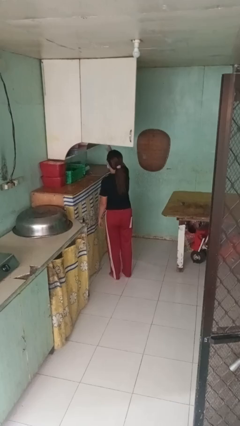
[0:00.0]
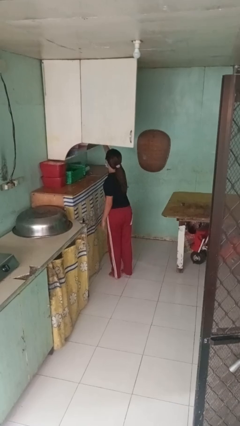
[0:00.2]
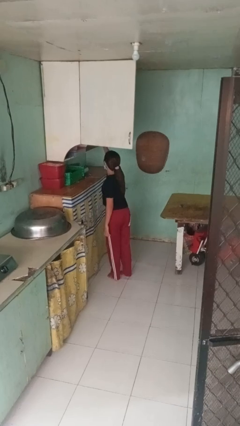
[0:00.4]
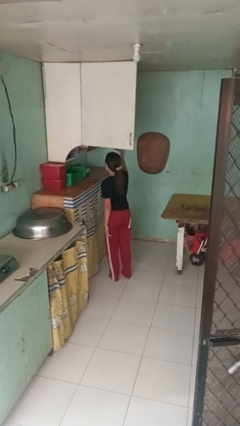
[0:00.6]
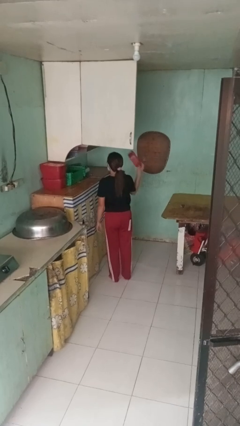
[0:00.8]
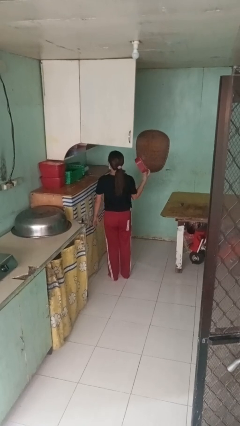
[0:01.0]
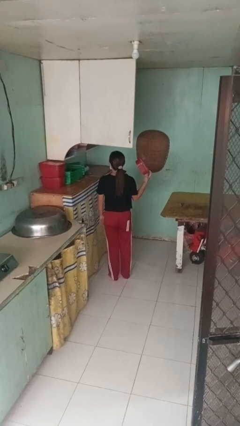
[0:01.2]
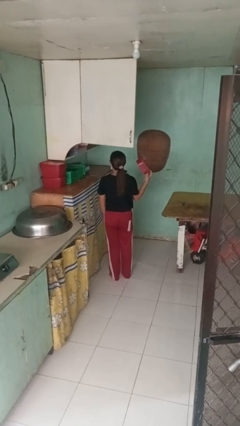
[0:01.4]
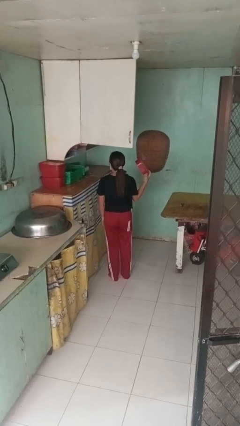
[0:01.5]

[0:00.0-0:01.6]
person takes object from cabinet

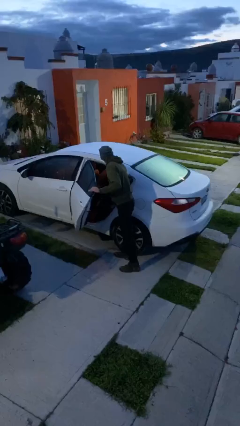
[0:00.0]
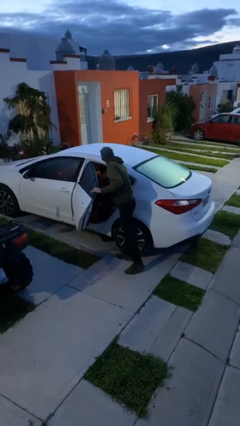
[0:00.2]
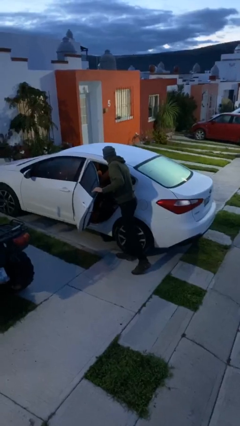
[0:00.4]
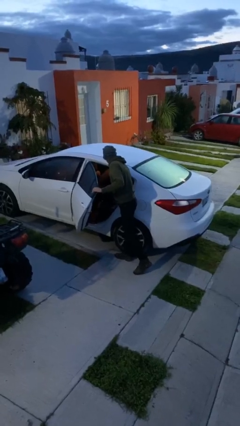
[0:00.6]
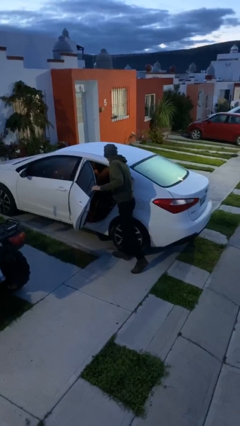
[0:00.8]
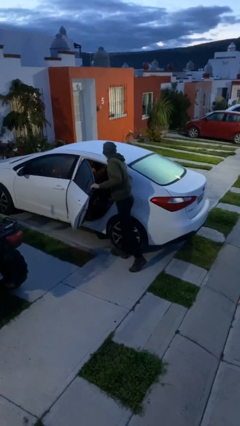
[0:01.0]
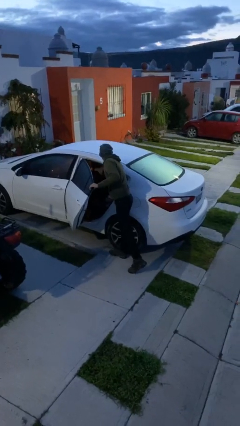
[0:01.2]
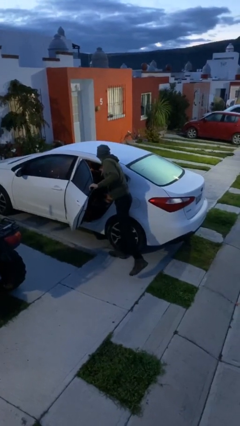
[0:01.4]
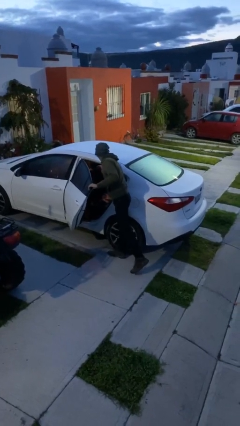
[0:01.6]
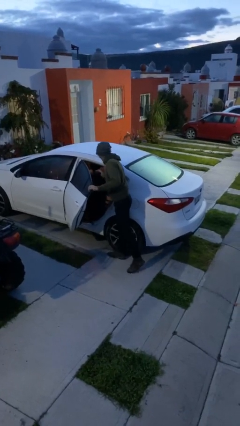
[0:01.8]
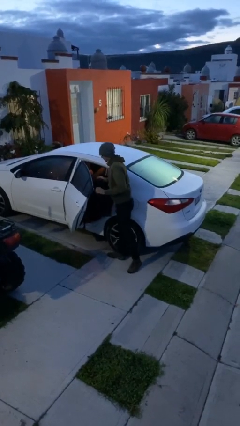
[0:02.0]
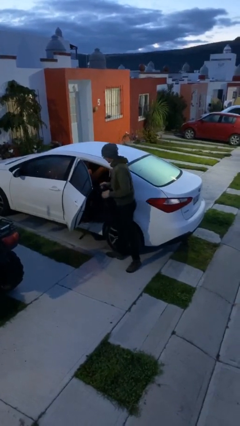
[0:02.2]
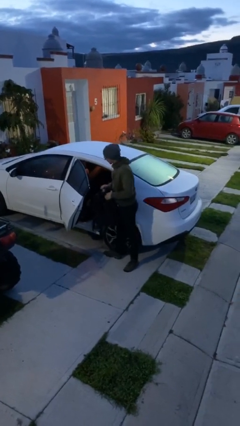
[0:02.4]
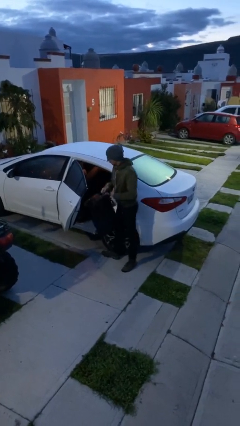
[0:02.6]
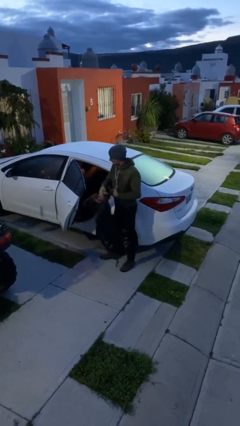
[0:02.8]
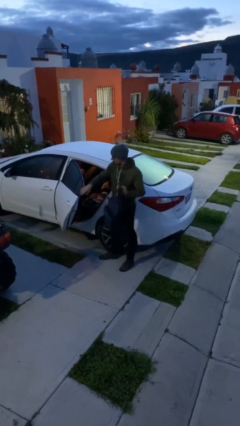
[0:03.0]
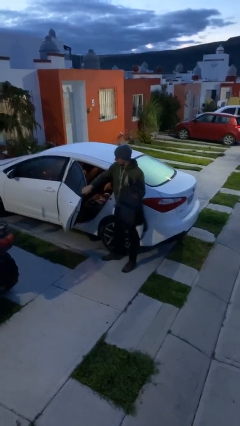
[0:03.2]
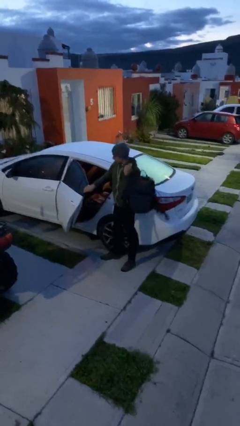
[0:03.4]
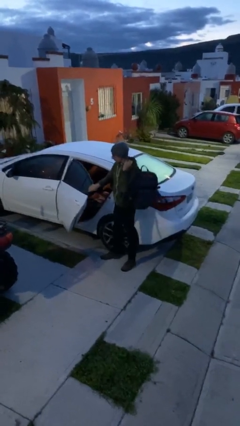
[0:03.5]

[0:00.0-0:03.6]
person unloads car

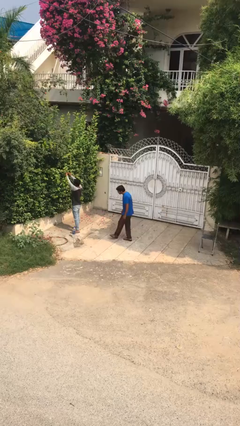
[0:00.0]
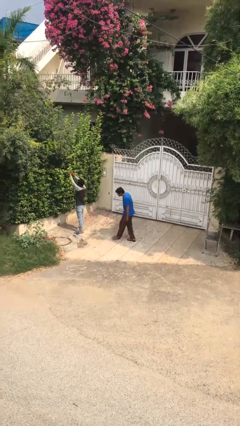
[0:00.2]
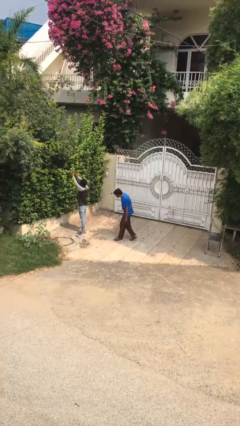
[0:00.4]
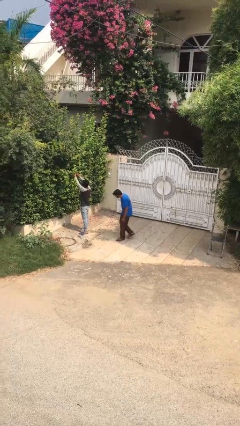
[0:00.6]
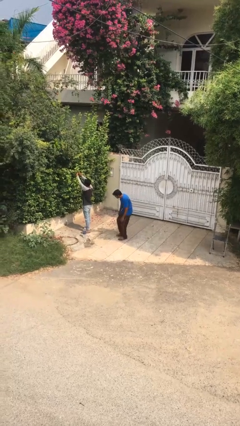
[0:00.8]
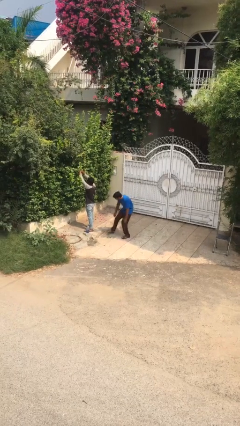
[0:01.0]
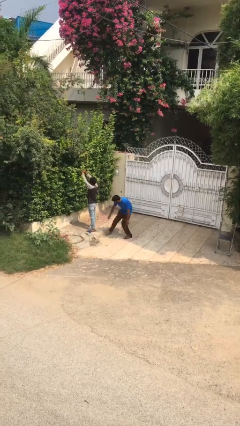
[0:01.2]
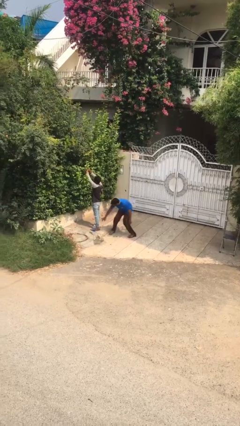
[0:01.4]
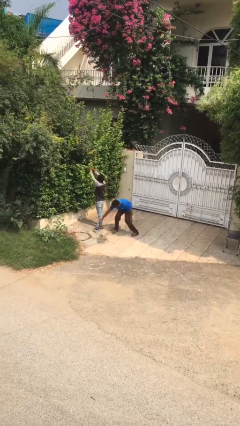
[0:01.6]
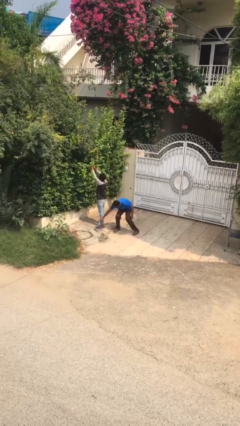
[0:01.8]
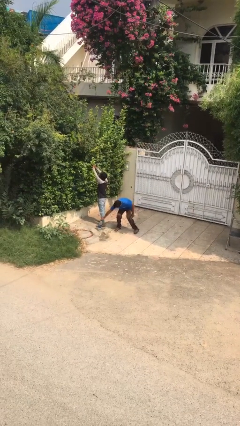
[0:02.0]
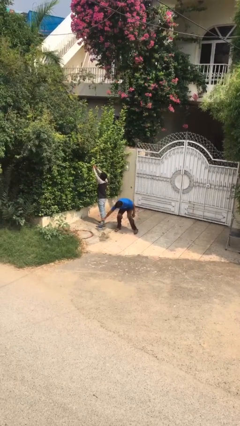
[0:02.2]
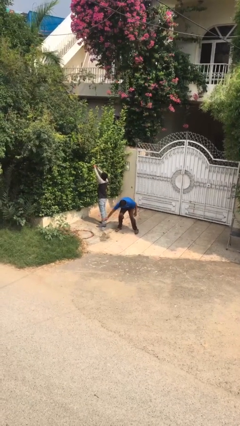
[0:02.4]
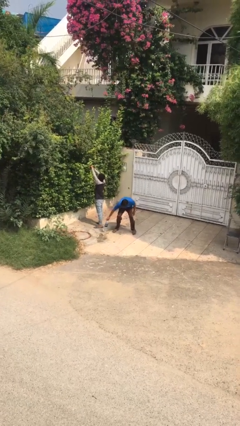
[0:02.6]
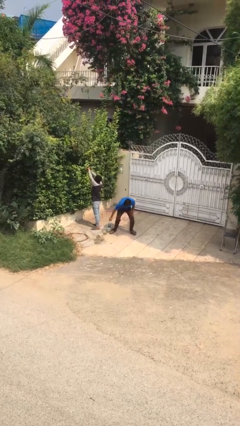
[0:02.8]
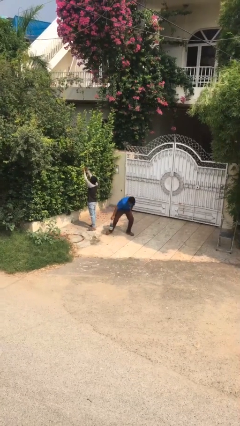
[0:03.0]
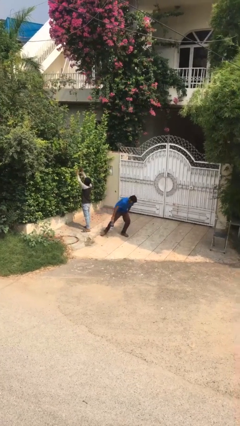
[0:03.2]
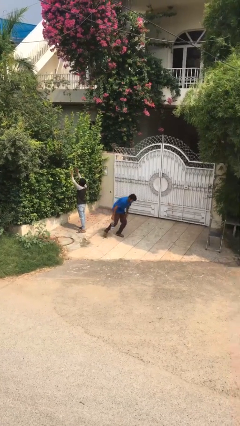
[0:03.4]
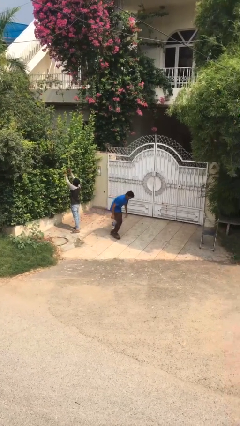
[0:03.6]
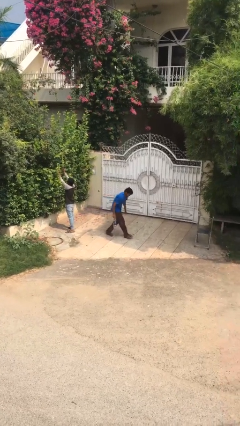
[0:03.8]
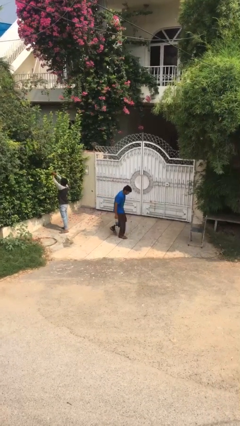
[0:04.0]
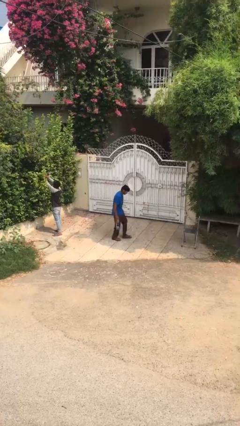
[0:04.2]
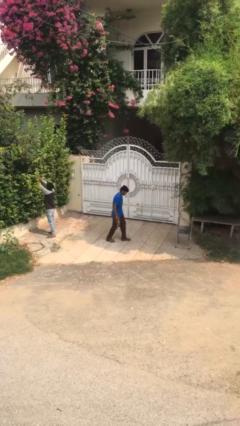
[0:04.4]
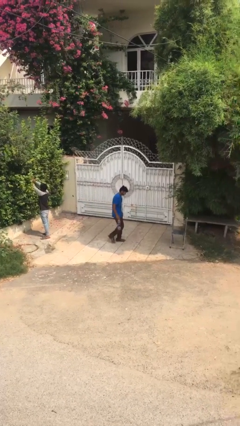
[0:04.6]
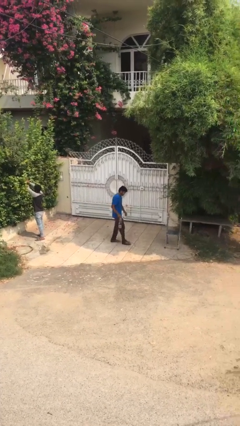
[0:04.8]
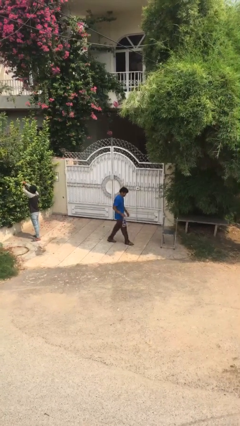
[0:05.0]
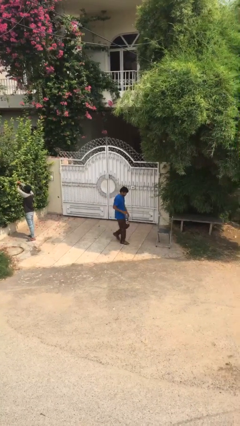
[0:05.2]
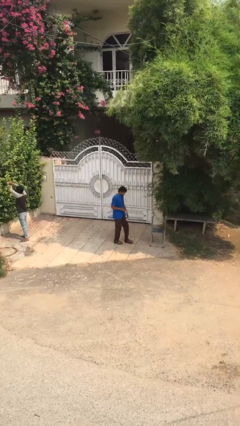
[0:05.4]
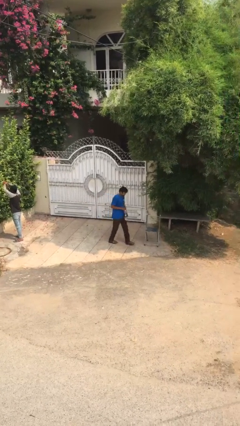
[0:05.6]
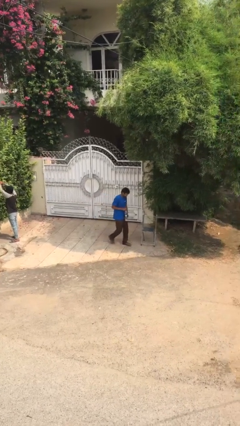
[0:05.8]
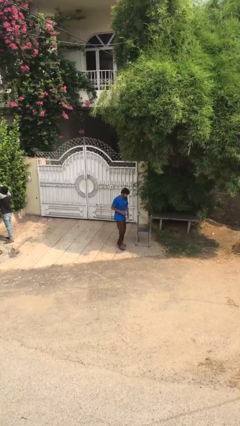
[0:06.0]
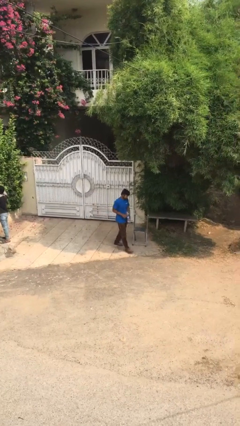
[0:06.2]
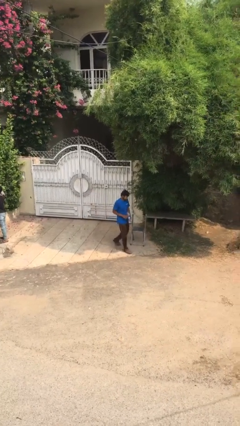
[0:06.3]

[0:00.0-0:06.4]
person steals object from person

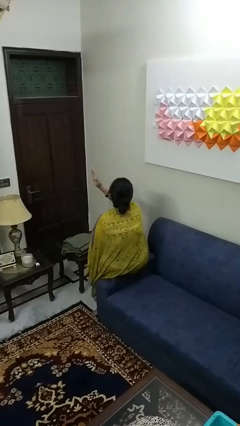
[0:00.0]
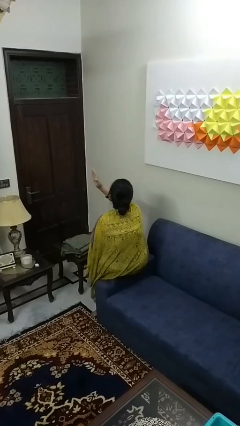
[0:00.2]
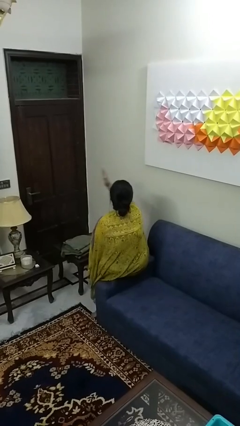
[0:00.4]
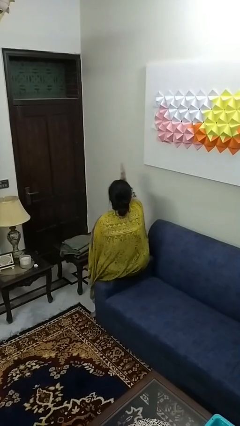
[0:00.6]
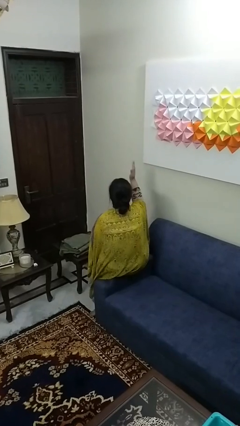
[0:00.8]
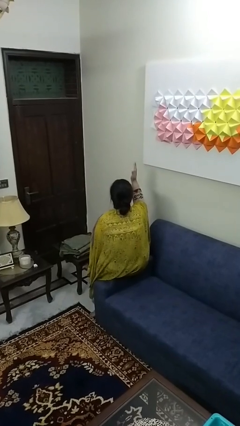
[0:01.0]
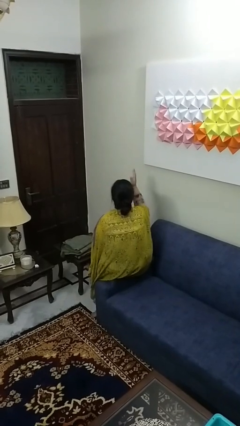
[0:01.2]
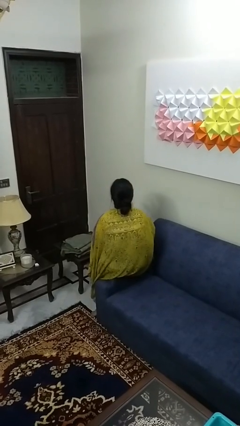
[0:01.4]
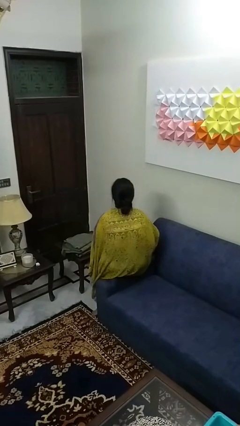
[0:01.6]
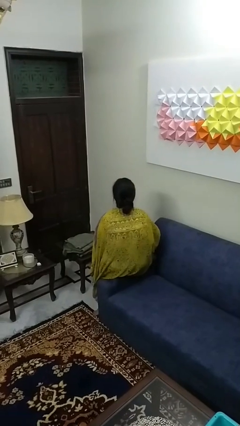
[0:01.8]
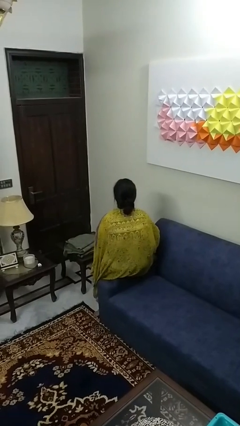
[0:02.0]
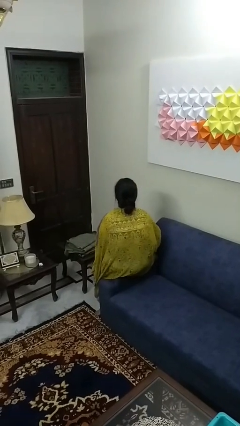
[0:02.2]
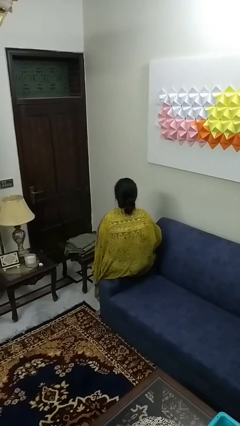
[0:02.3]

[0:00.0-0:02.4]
person gestures swipe right

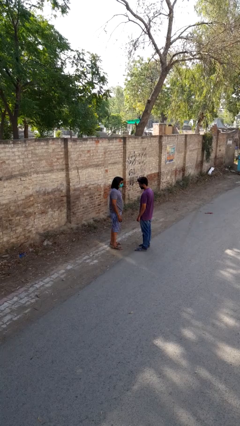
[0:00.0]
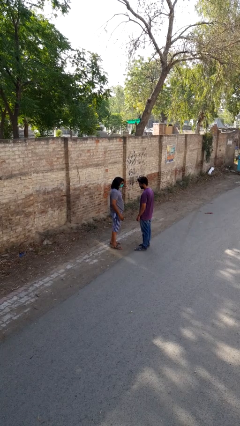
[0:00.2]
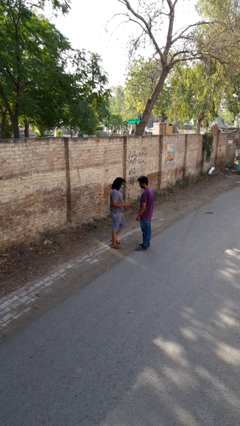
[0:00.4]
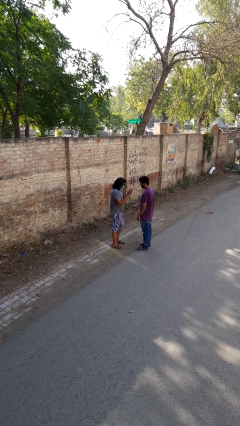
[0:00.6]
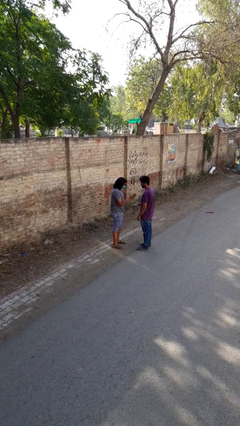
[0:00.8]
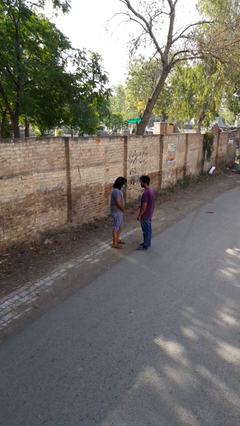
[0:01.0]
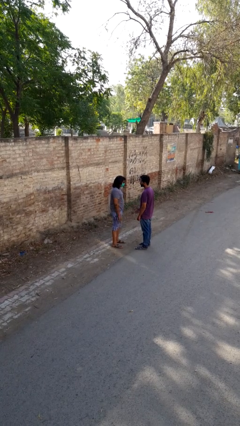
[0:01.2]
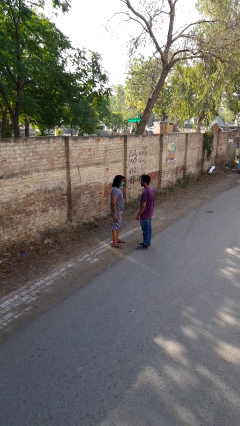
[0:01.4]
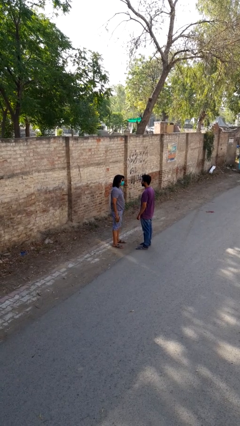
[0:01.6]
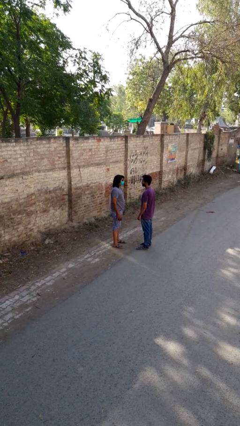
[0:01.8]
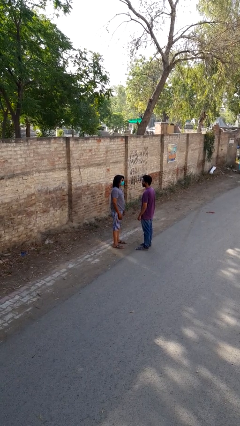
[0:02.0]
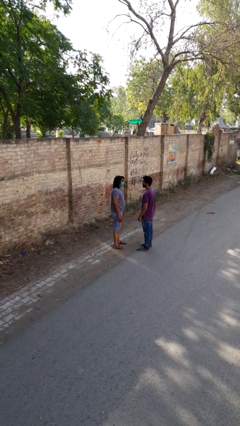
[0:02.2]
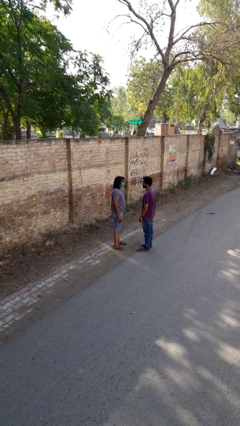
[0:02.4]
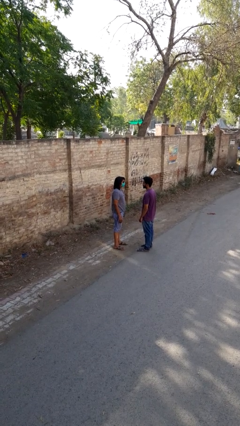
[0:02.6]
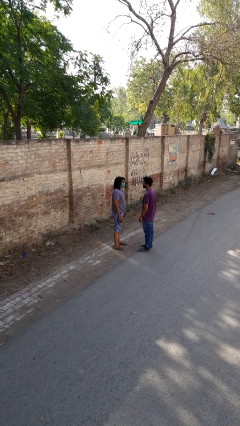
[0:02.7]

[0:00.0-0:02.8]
person highfives hand

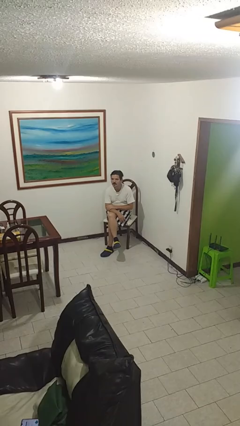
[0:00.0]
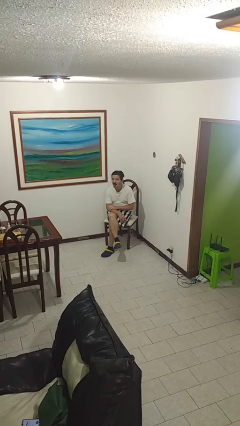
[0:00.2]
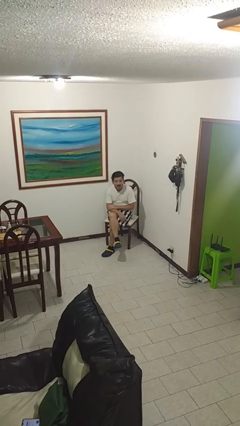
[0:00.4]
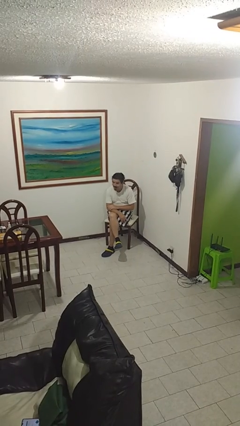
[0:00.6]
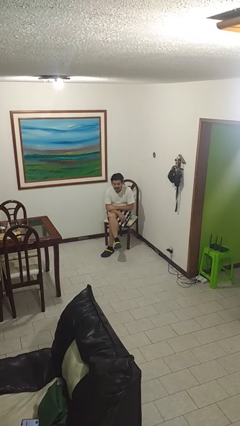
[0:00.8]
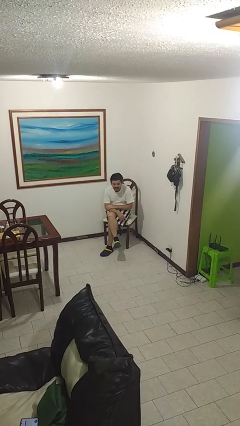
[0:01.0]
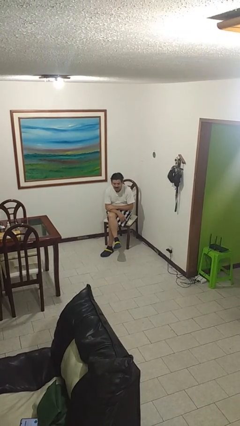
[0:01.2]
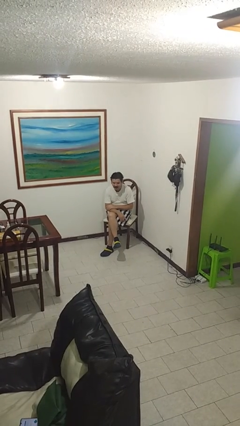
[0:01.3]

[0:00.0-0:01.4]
person sticks out tongue
